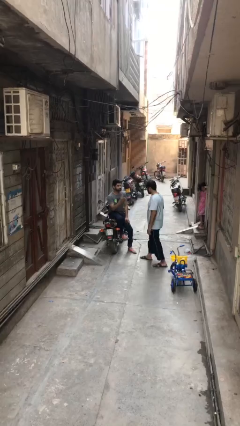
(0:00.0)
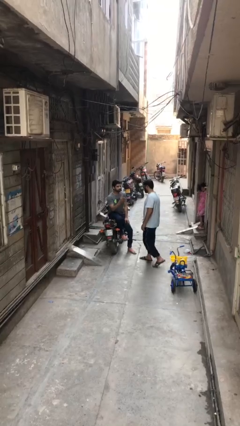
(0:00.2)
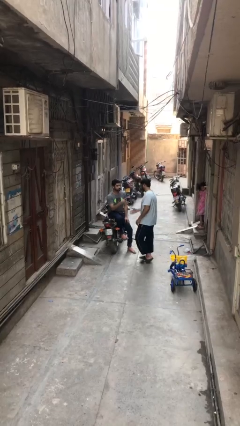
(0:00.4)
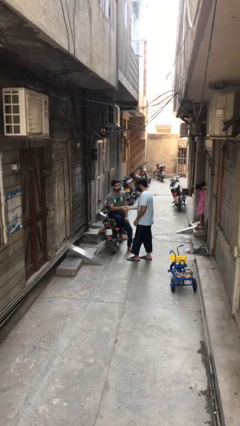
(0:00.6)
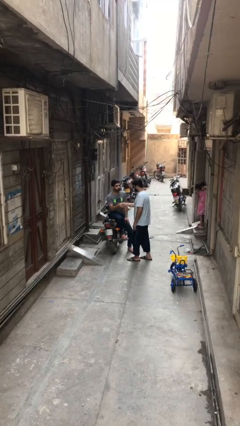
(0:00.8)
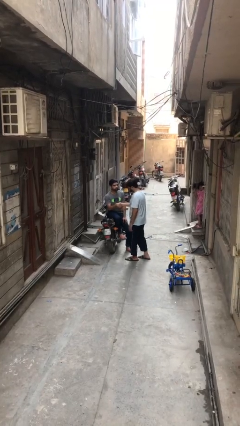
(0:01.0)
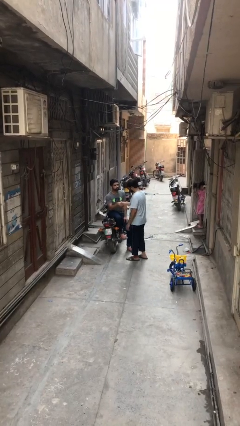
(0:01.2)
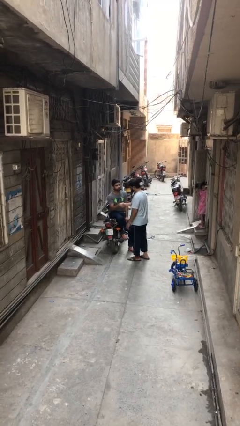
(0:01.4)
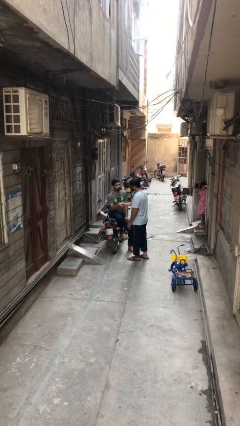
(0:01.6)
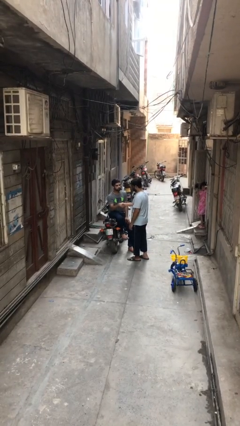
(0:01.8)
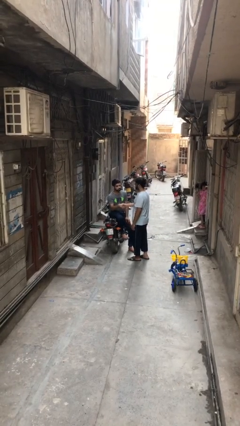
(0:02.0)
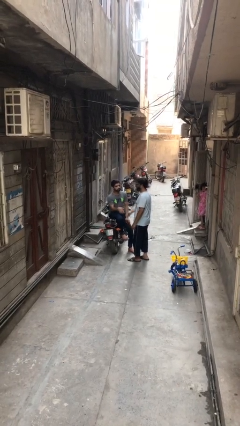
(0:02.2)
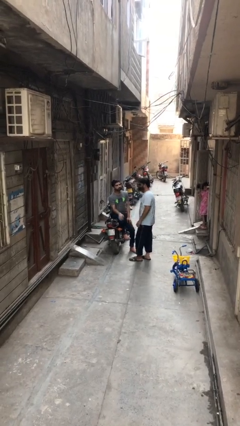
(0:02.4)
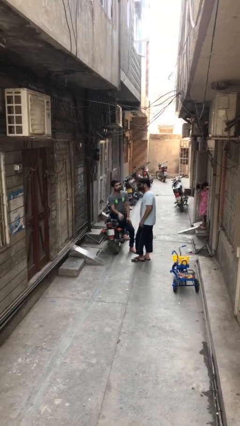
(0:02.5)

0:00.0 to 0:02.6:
person shakes hand

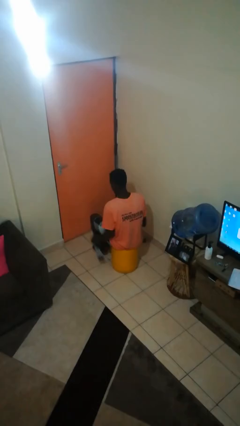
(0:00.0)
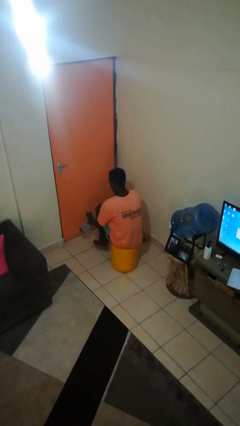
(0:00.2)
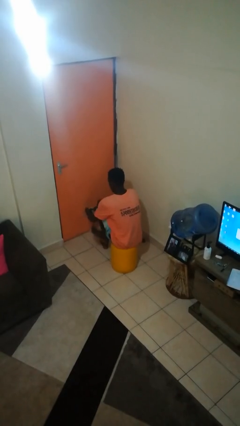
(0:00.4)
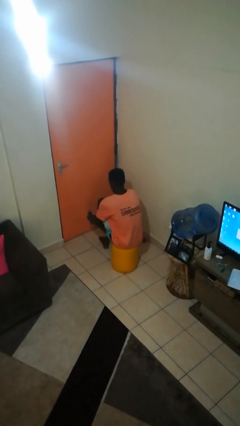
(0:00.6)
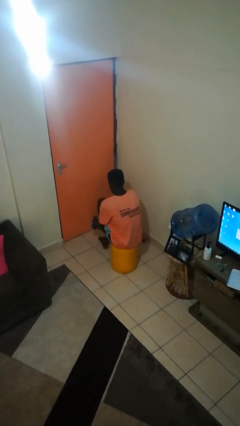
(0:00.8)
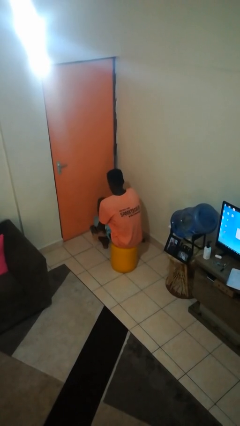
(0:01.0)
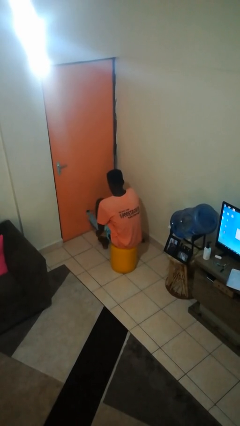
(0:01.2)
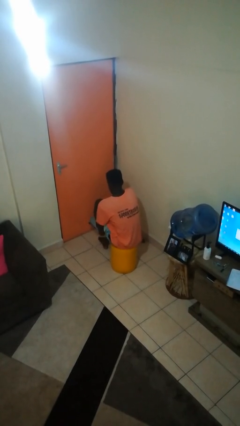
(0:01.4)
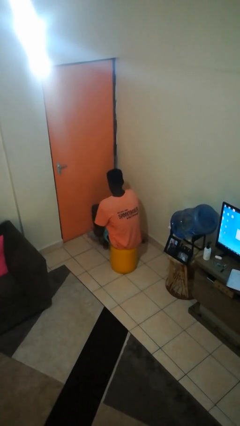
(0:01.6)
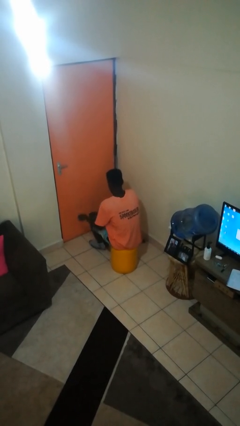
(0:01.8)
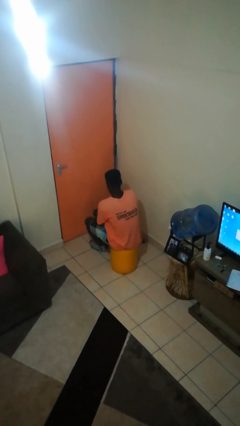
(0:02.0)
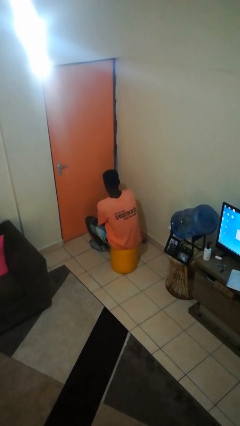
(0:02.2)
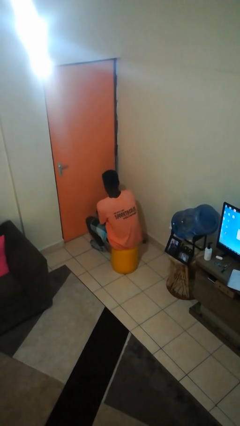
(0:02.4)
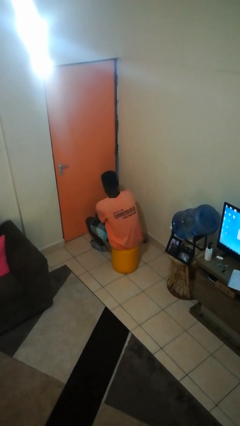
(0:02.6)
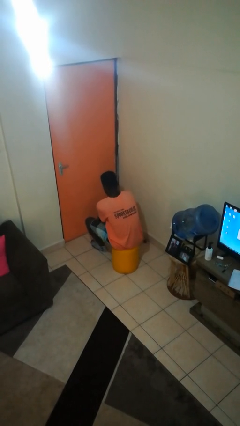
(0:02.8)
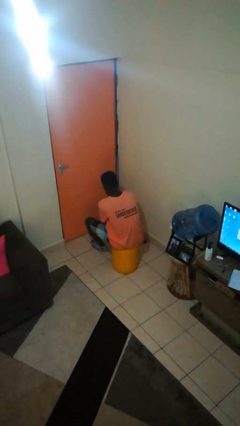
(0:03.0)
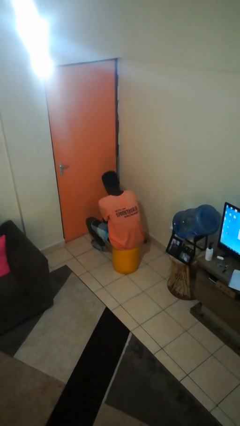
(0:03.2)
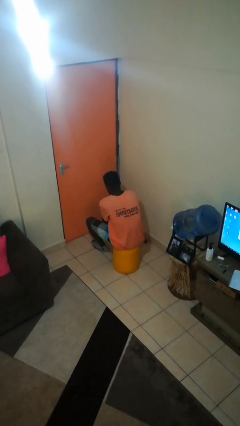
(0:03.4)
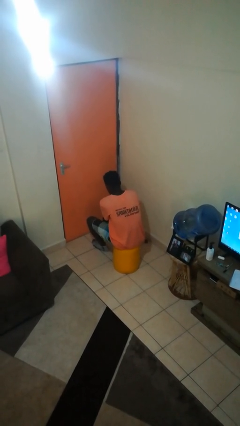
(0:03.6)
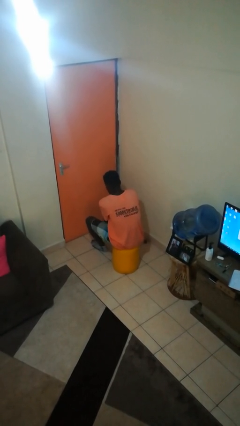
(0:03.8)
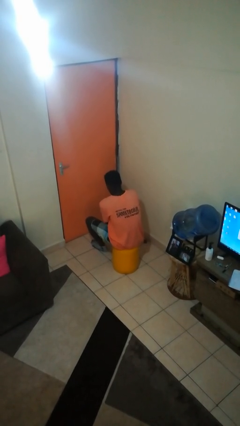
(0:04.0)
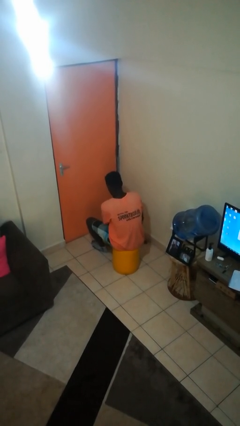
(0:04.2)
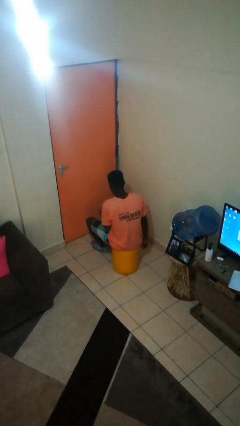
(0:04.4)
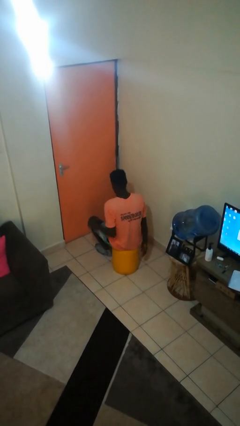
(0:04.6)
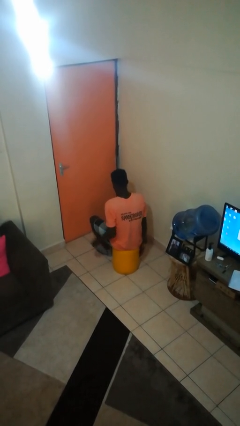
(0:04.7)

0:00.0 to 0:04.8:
person puts on socks

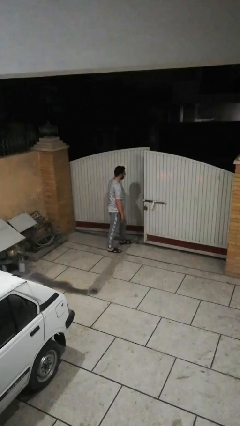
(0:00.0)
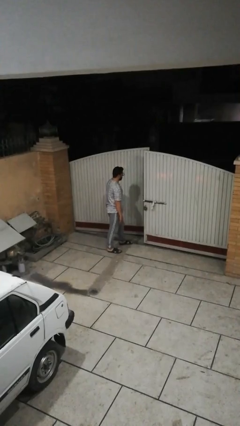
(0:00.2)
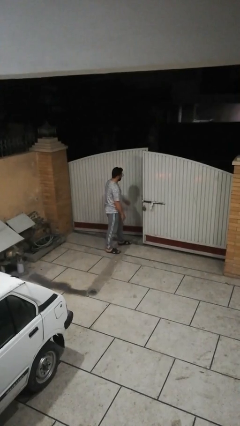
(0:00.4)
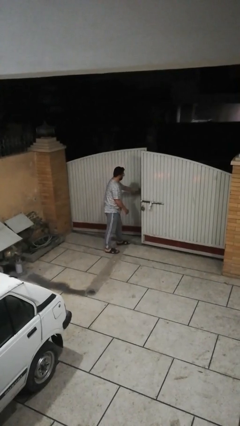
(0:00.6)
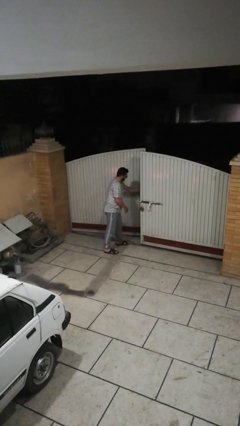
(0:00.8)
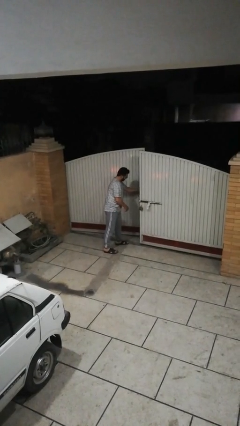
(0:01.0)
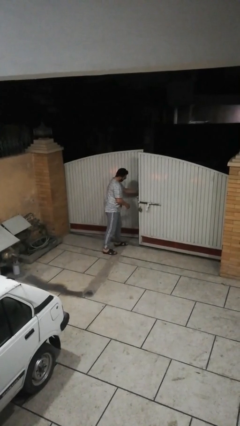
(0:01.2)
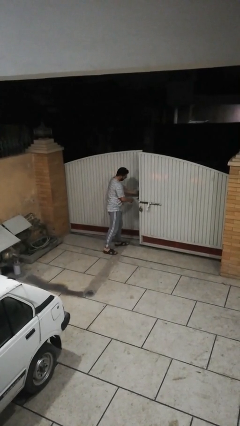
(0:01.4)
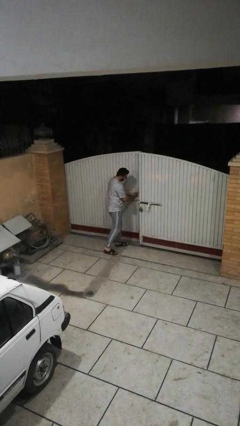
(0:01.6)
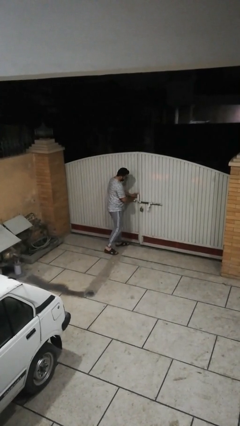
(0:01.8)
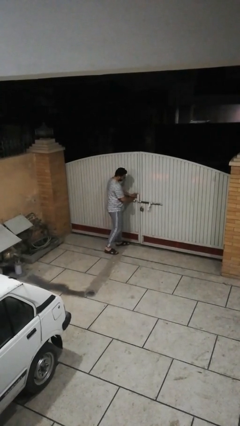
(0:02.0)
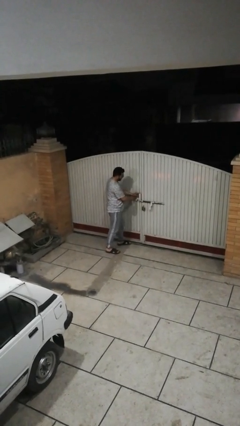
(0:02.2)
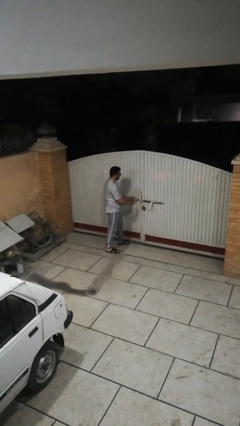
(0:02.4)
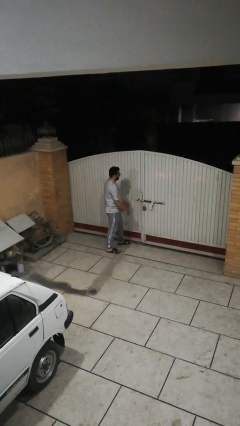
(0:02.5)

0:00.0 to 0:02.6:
person closes facility door

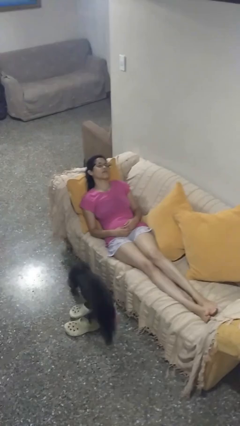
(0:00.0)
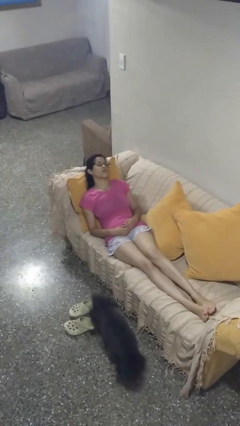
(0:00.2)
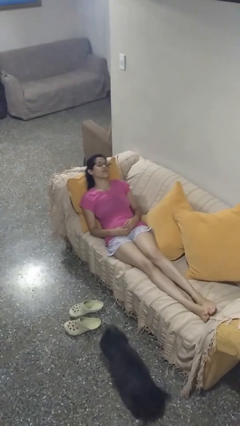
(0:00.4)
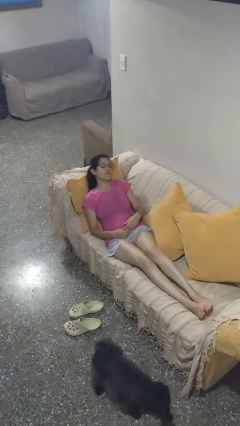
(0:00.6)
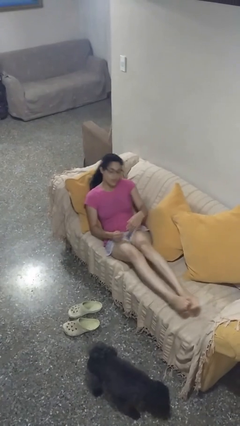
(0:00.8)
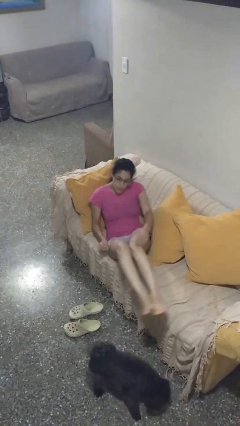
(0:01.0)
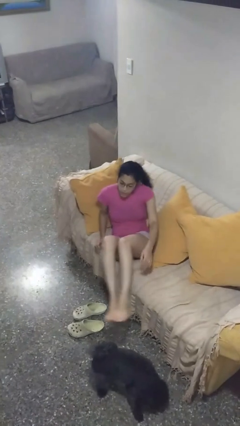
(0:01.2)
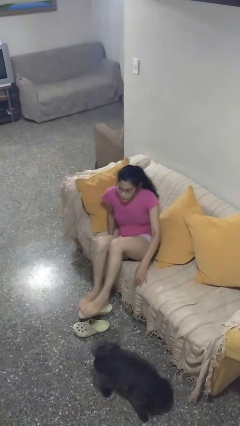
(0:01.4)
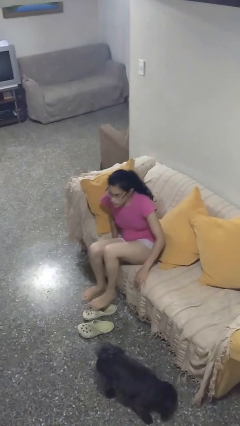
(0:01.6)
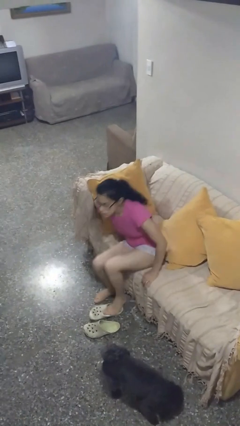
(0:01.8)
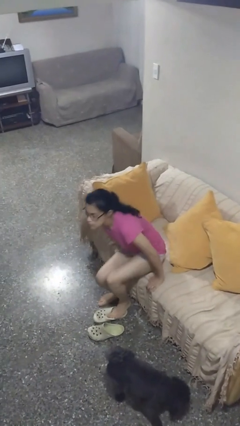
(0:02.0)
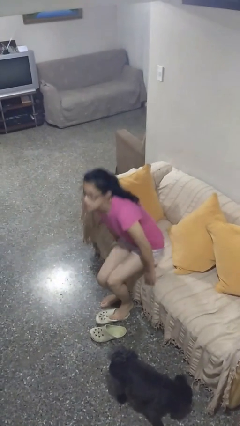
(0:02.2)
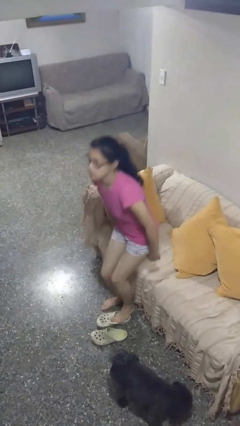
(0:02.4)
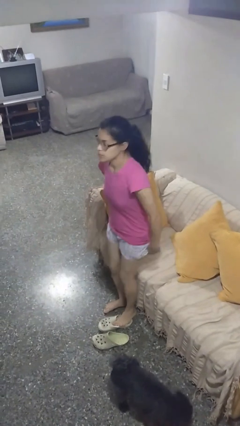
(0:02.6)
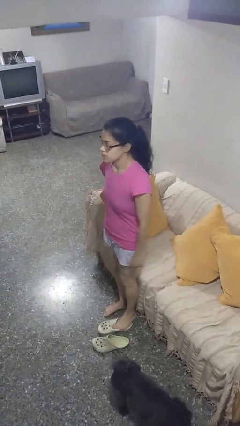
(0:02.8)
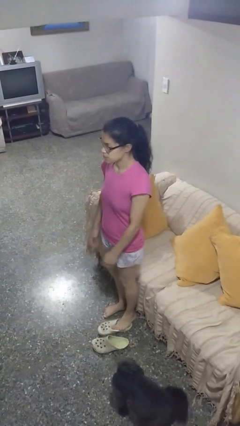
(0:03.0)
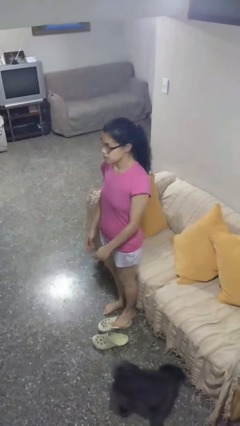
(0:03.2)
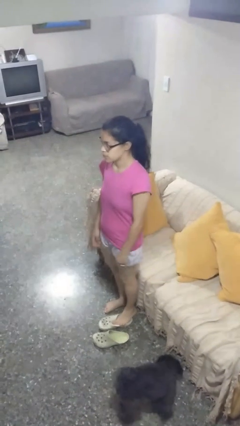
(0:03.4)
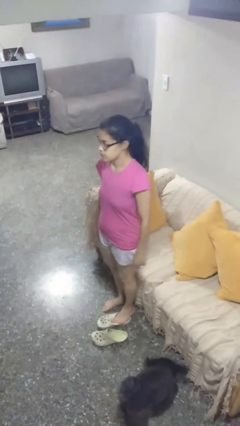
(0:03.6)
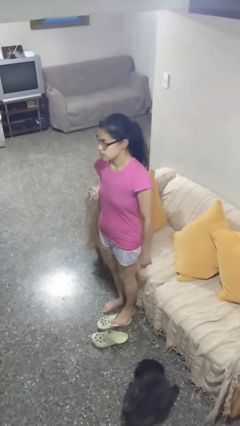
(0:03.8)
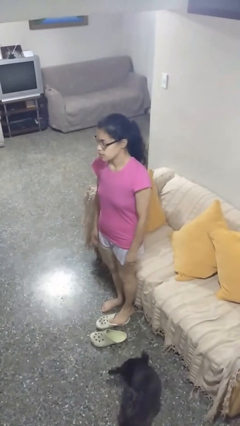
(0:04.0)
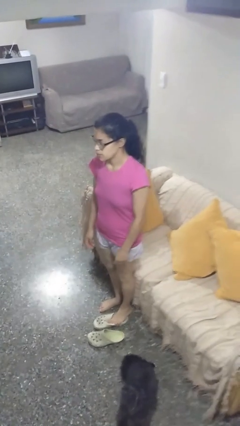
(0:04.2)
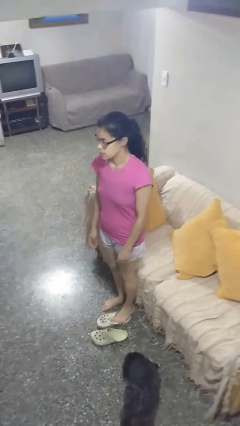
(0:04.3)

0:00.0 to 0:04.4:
person stands up

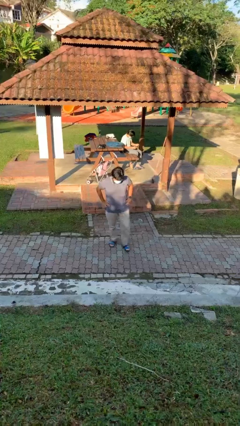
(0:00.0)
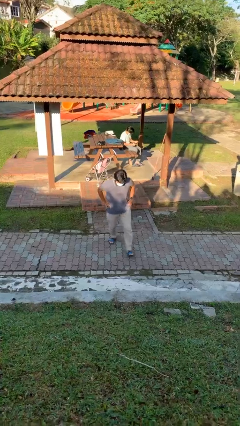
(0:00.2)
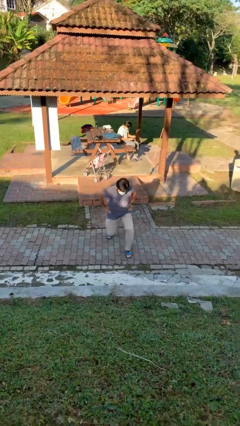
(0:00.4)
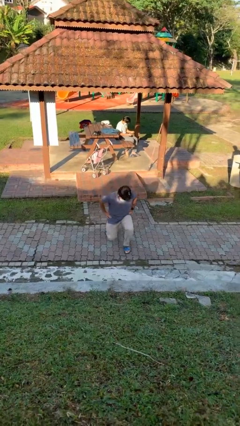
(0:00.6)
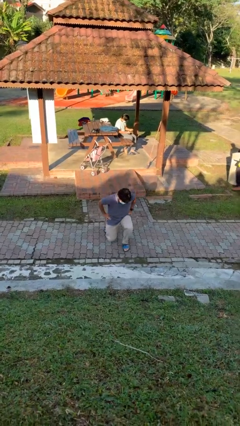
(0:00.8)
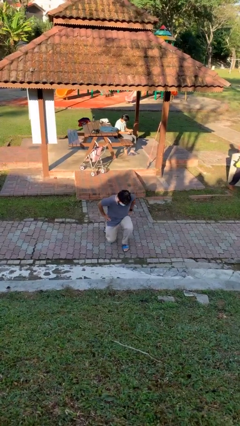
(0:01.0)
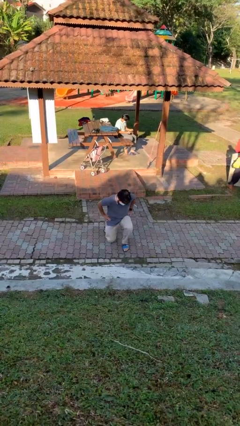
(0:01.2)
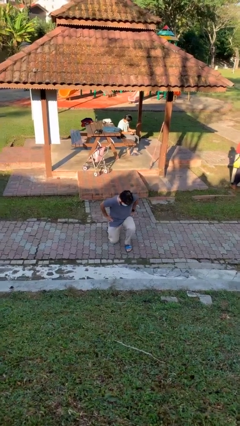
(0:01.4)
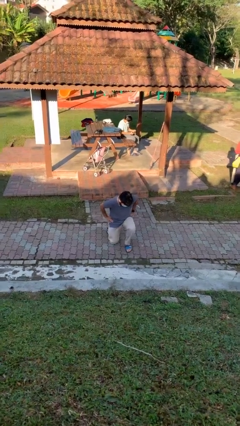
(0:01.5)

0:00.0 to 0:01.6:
person kneels

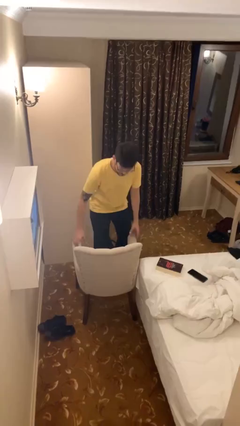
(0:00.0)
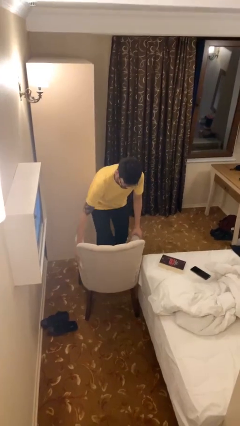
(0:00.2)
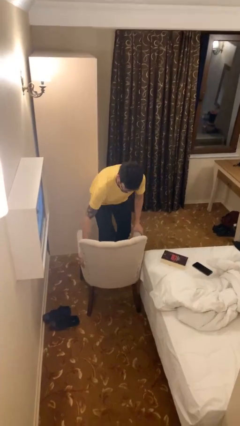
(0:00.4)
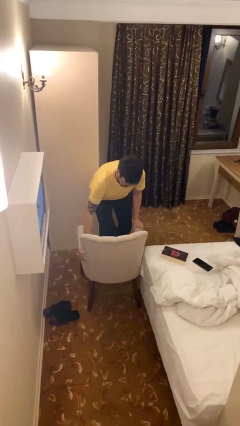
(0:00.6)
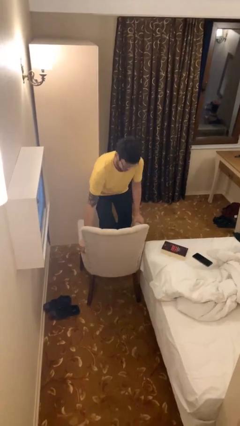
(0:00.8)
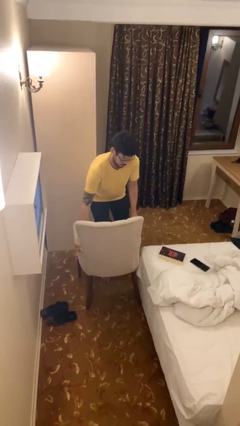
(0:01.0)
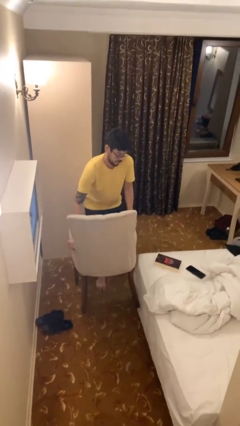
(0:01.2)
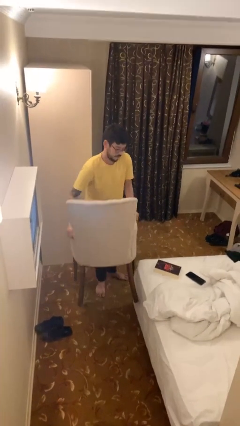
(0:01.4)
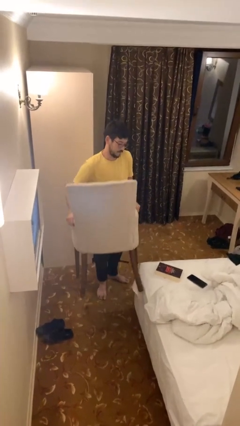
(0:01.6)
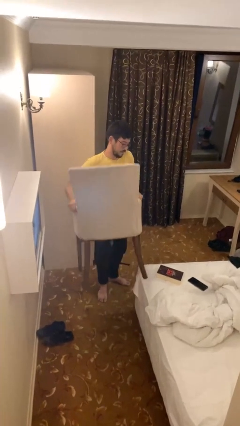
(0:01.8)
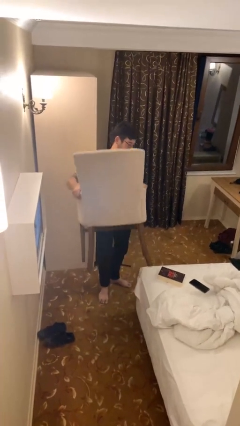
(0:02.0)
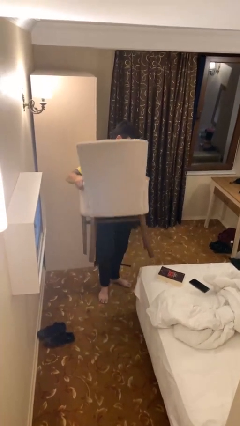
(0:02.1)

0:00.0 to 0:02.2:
person picks up object from floor
